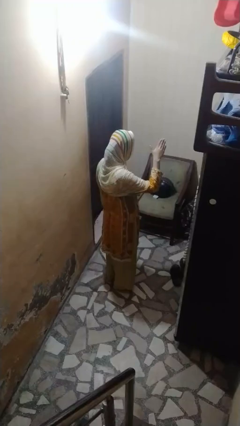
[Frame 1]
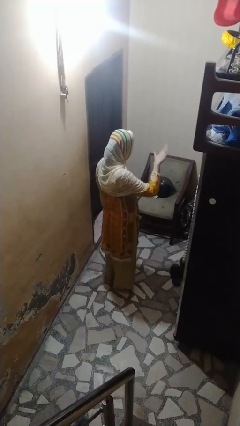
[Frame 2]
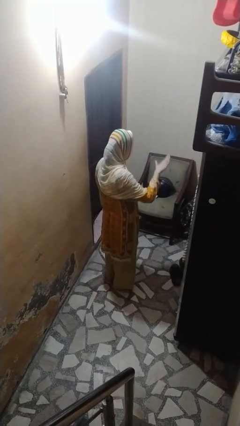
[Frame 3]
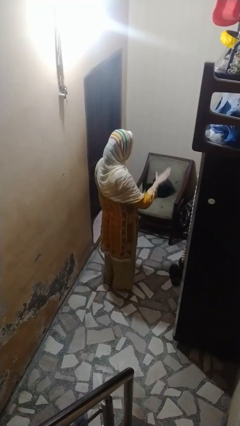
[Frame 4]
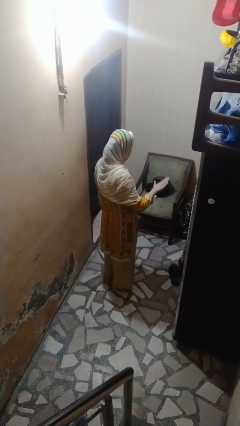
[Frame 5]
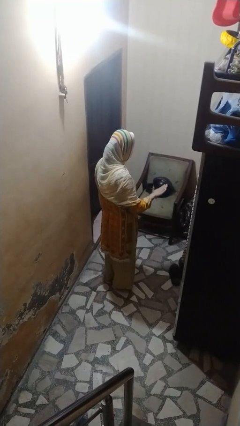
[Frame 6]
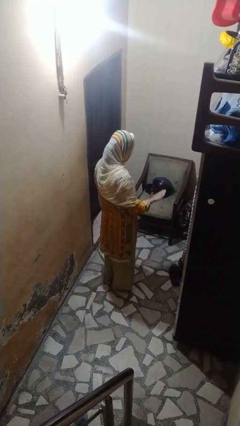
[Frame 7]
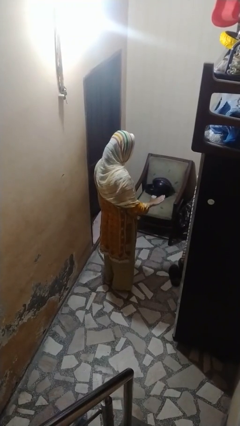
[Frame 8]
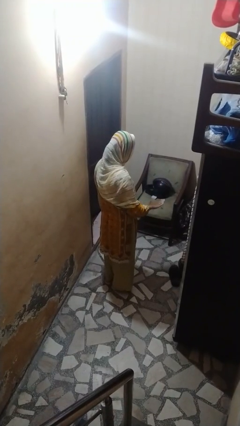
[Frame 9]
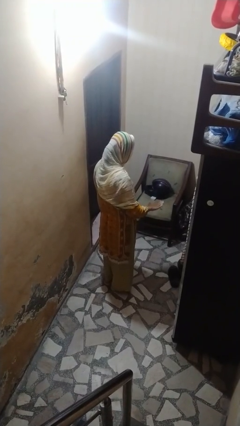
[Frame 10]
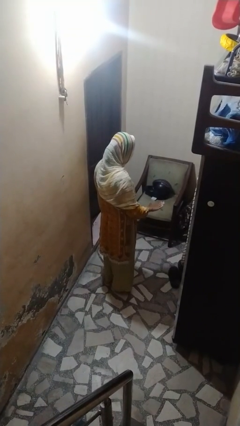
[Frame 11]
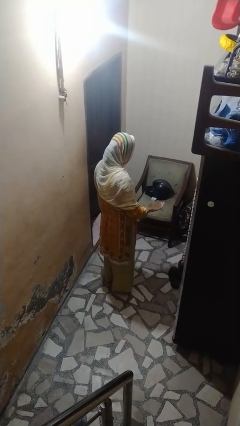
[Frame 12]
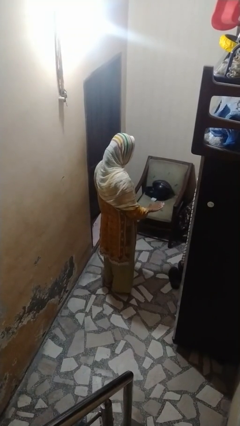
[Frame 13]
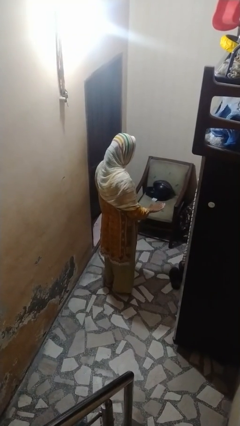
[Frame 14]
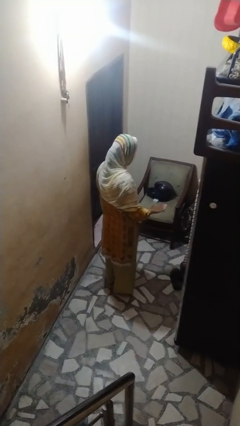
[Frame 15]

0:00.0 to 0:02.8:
person gestures swipe down

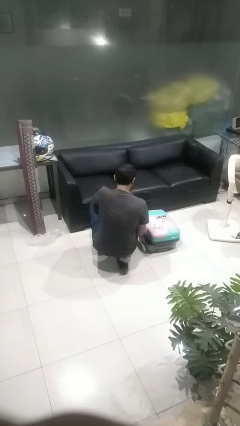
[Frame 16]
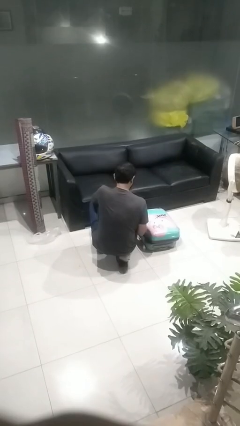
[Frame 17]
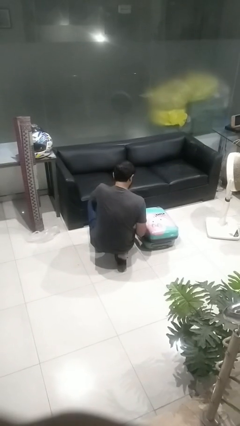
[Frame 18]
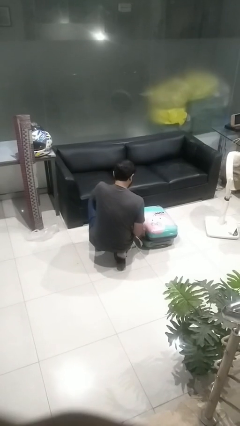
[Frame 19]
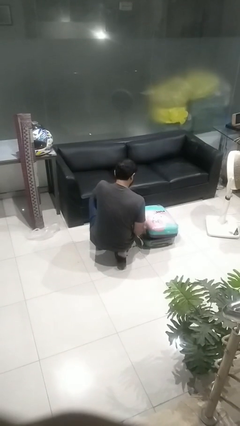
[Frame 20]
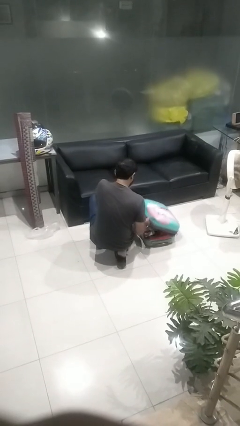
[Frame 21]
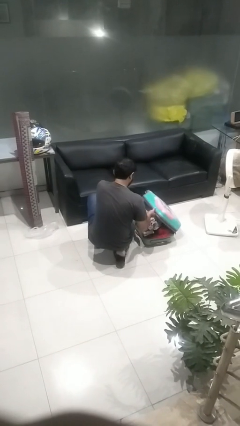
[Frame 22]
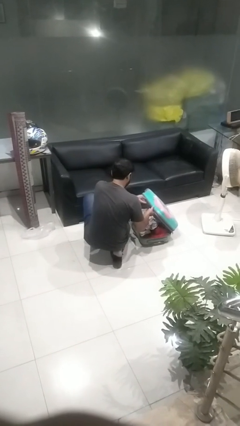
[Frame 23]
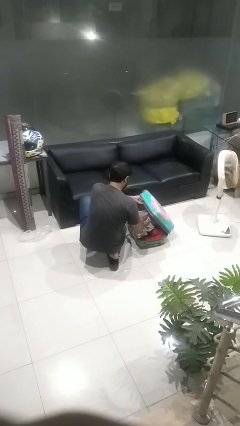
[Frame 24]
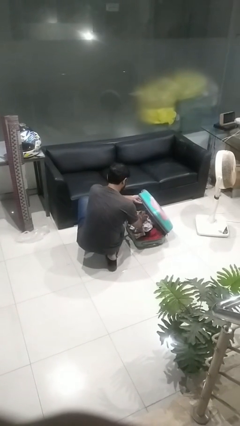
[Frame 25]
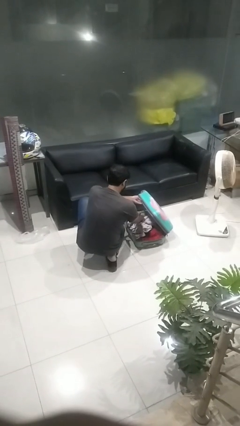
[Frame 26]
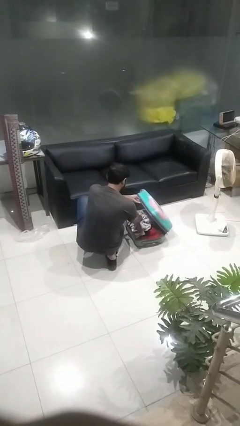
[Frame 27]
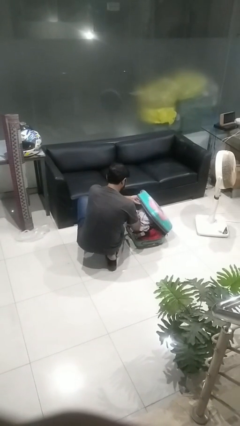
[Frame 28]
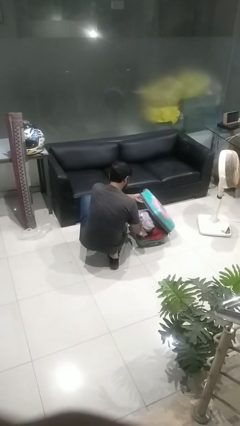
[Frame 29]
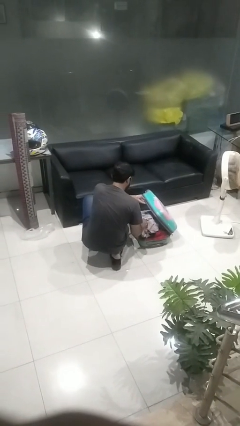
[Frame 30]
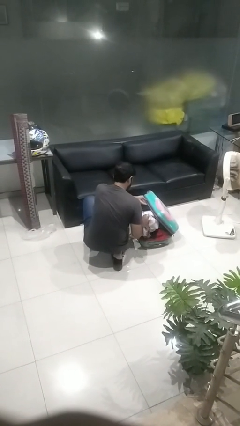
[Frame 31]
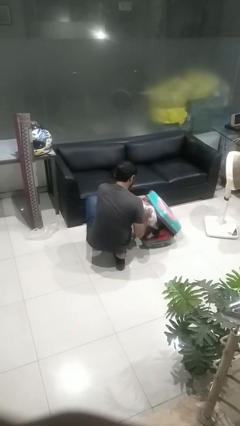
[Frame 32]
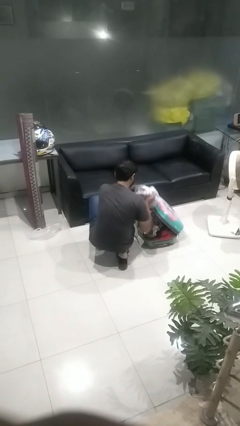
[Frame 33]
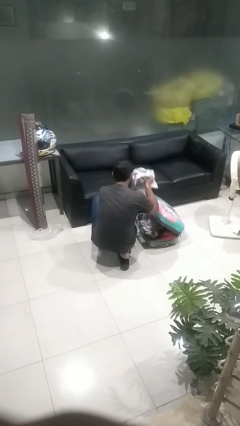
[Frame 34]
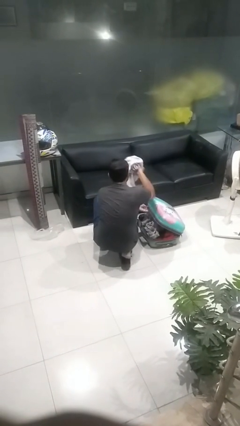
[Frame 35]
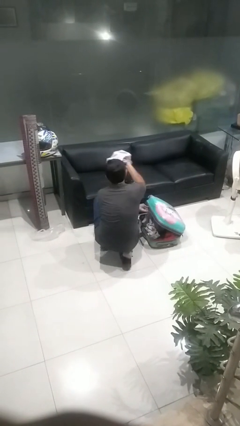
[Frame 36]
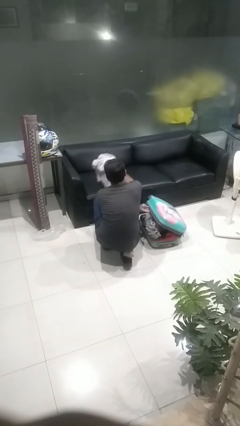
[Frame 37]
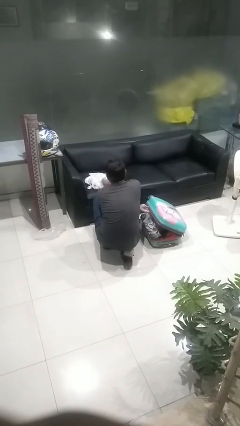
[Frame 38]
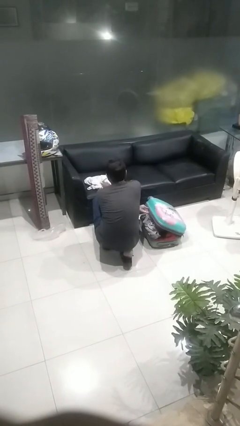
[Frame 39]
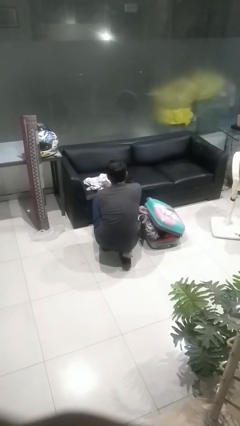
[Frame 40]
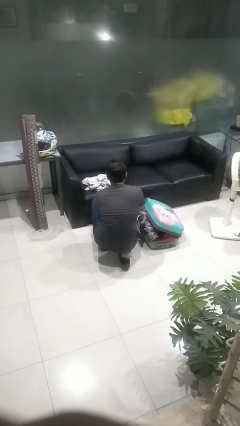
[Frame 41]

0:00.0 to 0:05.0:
person unloads clothes from suitcase

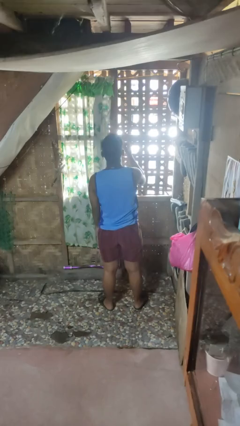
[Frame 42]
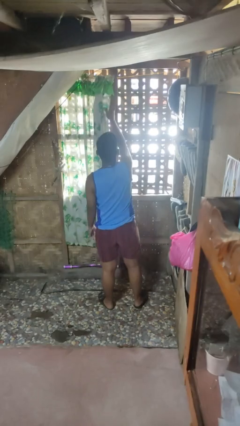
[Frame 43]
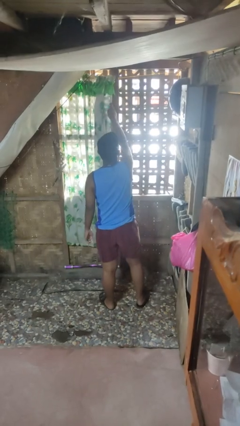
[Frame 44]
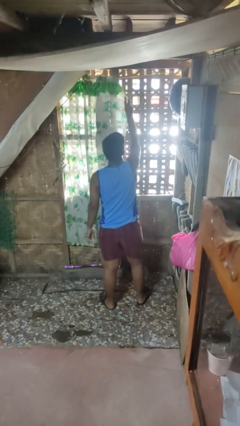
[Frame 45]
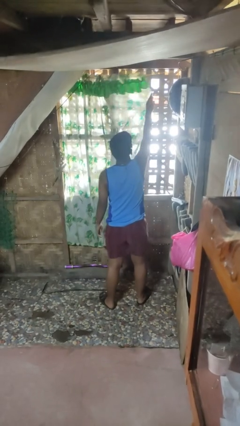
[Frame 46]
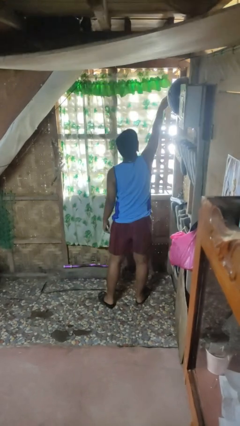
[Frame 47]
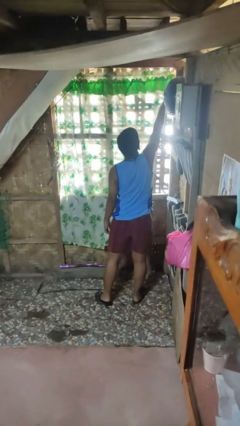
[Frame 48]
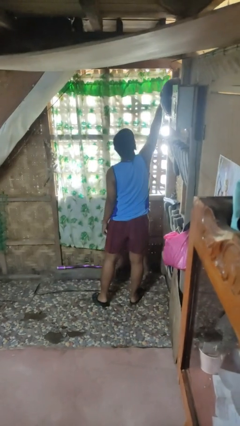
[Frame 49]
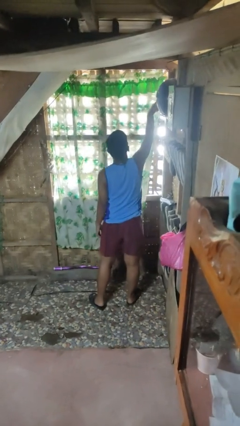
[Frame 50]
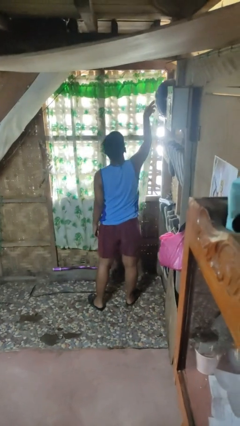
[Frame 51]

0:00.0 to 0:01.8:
person closes curtains

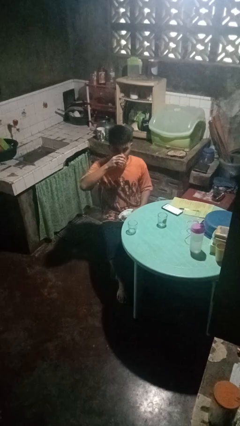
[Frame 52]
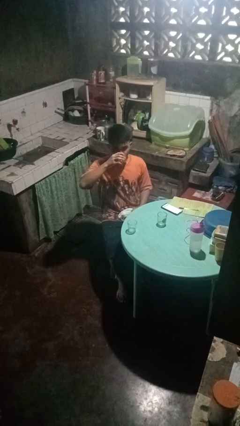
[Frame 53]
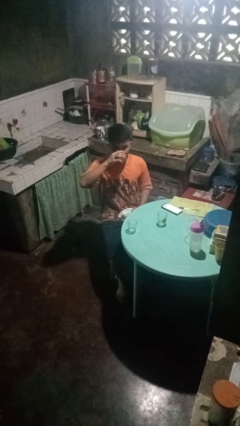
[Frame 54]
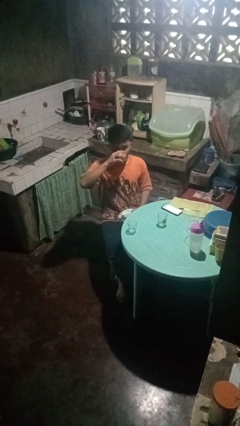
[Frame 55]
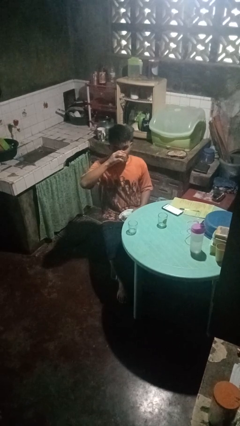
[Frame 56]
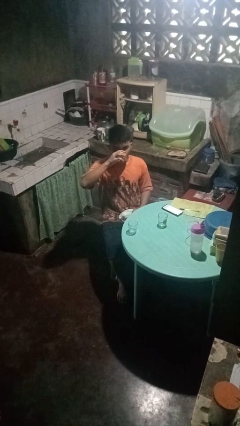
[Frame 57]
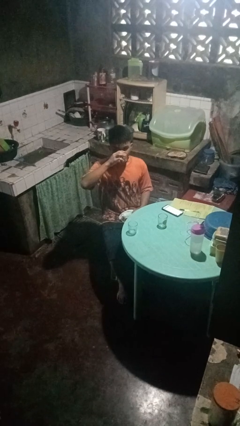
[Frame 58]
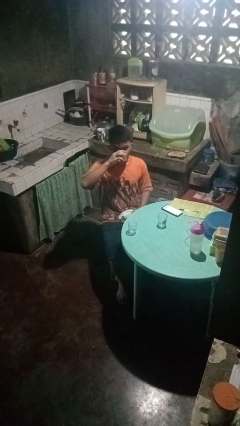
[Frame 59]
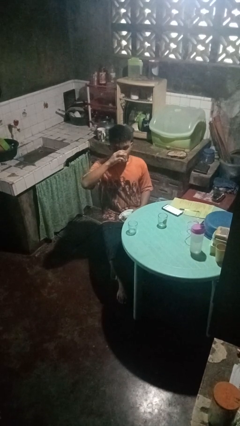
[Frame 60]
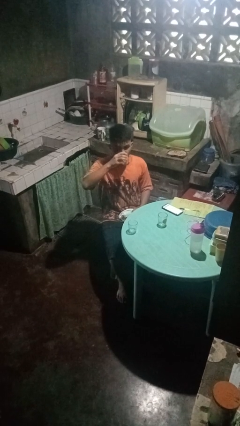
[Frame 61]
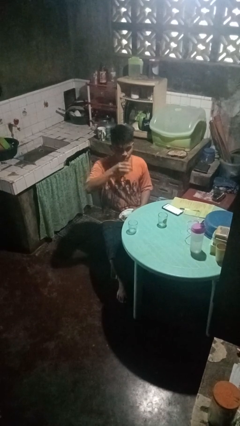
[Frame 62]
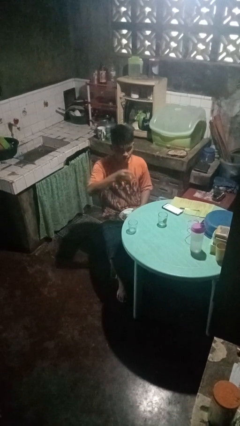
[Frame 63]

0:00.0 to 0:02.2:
person drinks from shotglass

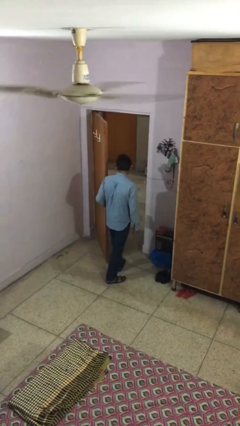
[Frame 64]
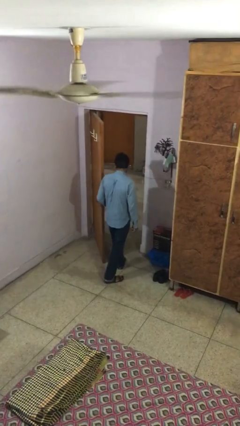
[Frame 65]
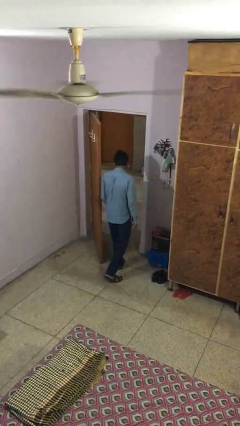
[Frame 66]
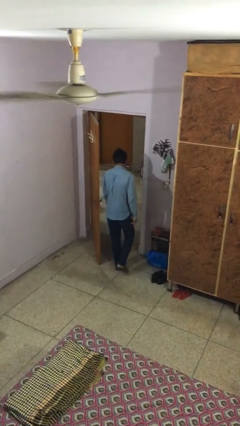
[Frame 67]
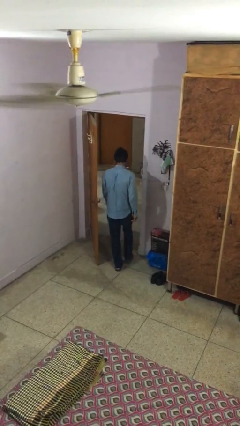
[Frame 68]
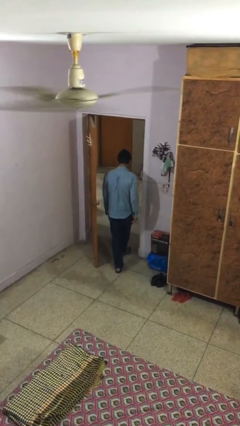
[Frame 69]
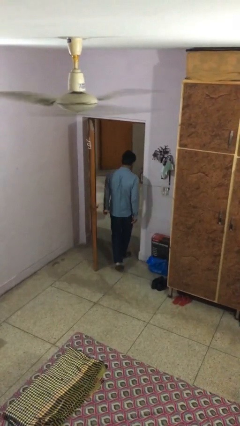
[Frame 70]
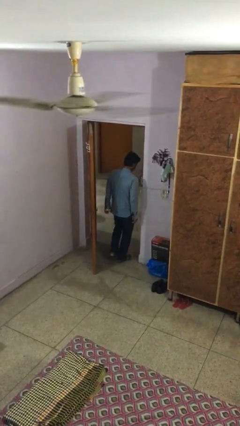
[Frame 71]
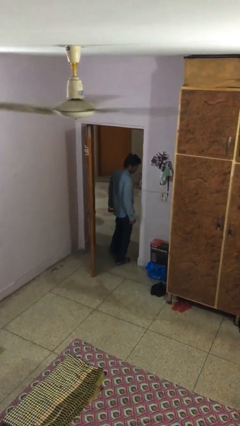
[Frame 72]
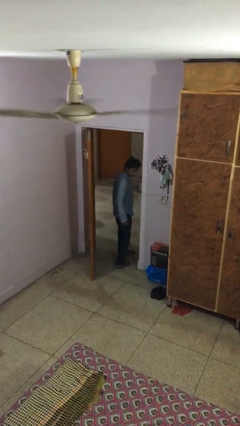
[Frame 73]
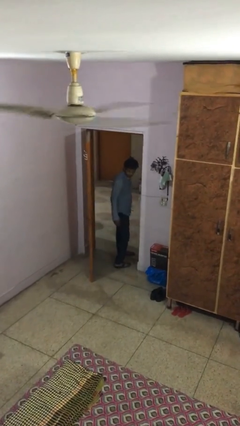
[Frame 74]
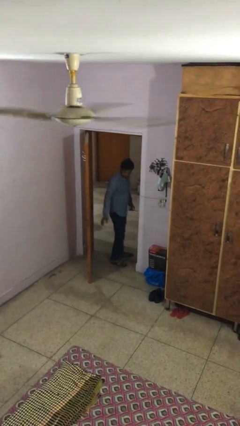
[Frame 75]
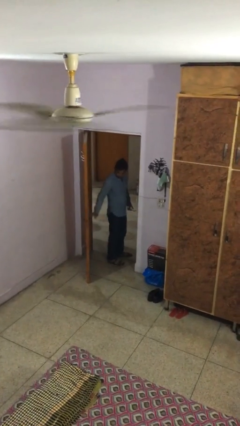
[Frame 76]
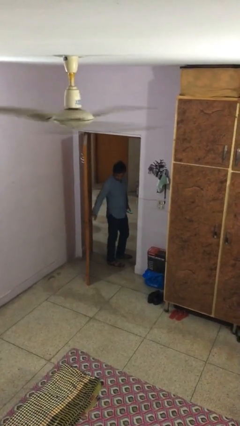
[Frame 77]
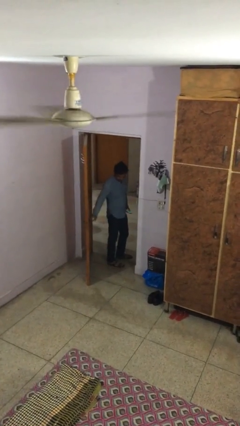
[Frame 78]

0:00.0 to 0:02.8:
person exits scene through structure

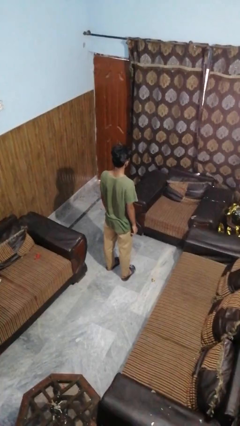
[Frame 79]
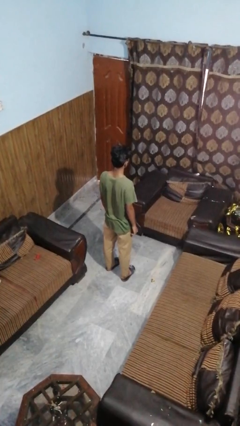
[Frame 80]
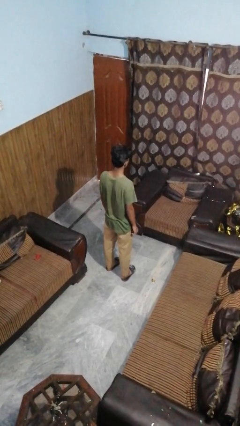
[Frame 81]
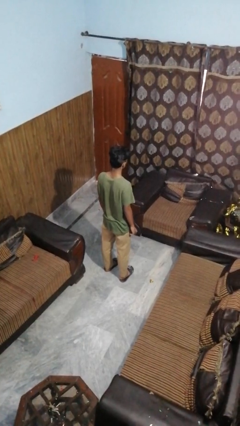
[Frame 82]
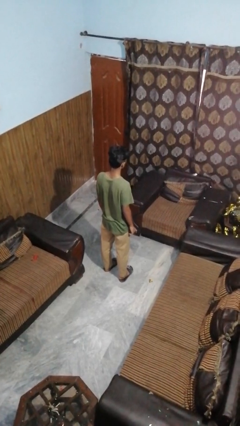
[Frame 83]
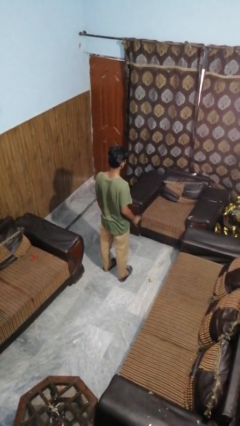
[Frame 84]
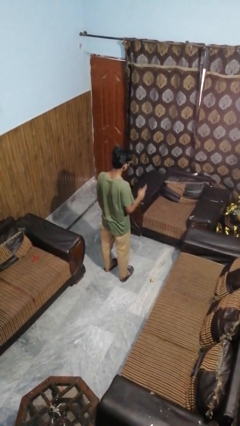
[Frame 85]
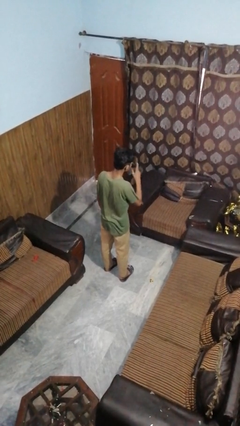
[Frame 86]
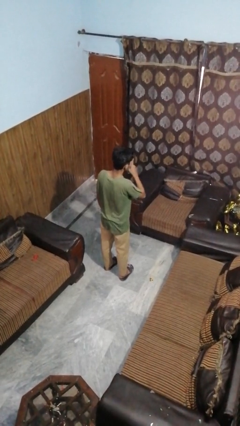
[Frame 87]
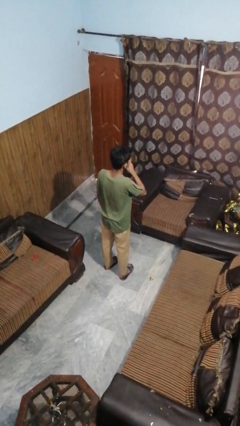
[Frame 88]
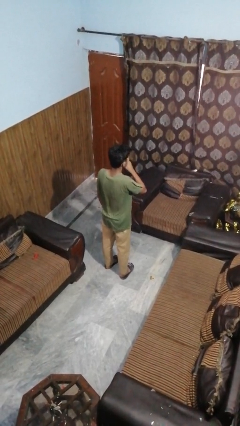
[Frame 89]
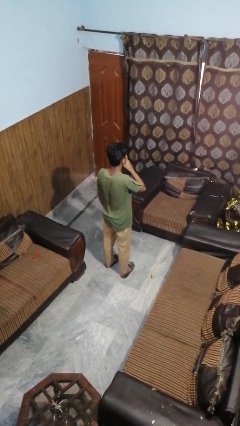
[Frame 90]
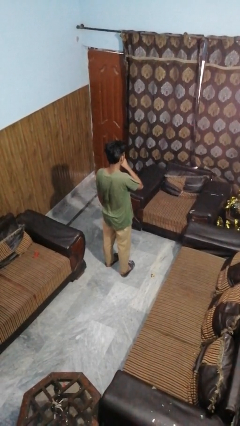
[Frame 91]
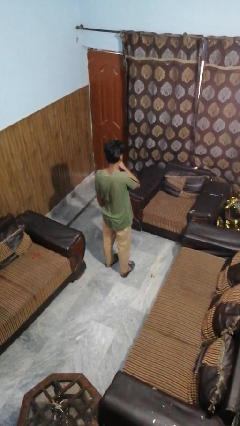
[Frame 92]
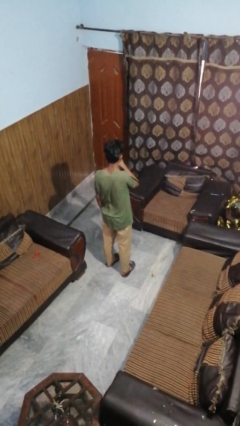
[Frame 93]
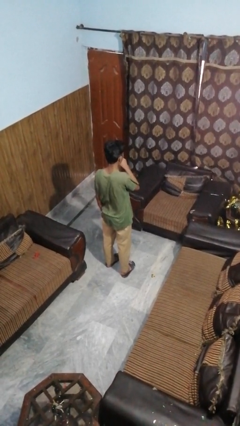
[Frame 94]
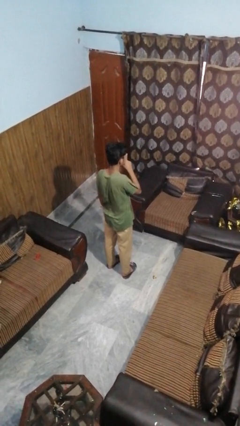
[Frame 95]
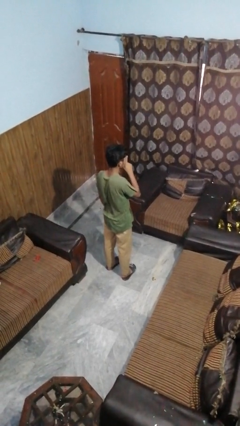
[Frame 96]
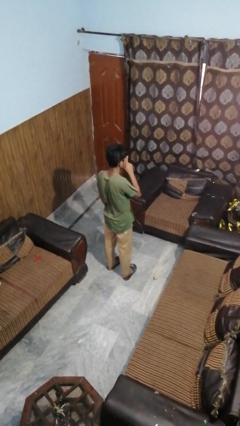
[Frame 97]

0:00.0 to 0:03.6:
person gestures be quiet
